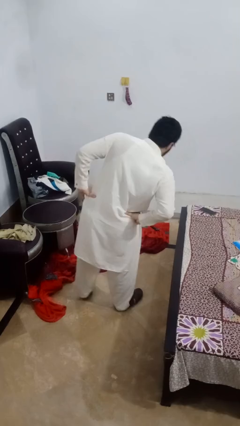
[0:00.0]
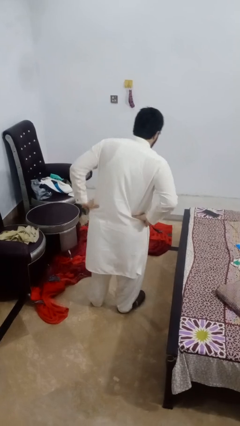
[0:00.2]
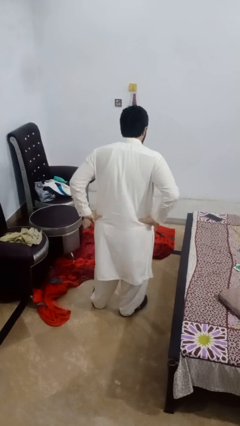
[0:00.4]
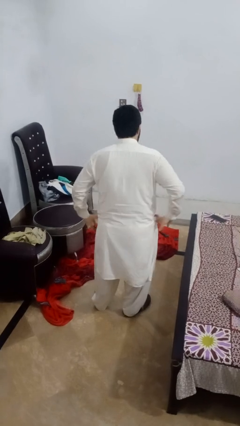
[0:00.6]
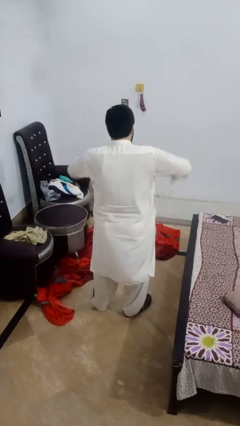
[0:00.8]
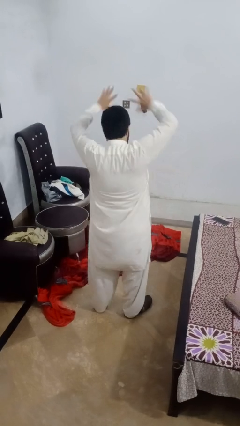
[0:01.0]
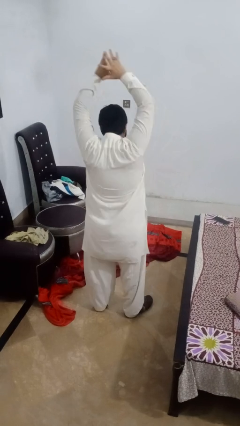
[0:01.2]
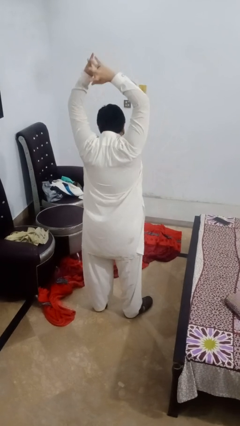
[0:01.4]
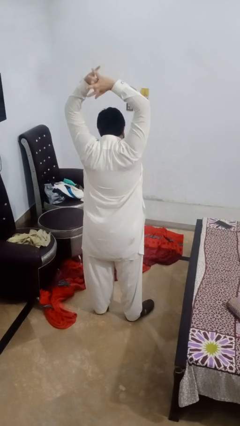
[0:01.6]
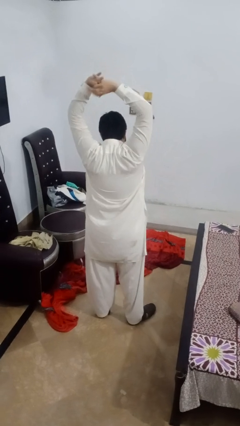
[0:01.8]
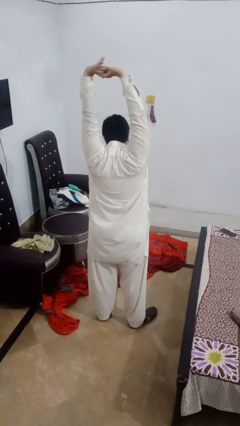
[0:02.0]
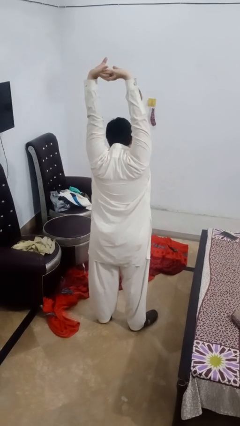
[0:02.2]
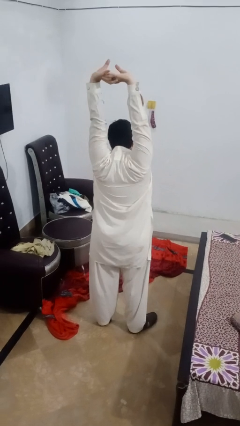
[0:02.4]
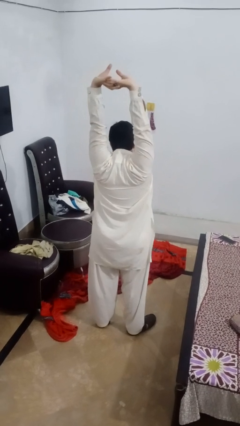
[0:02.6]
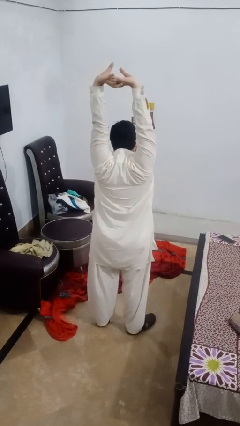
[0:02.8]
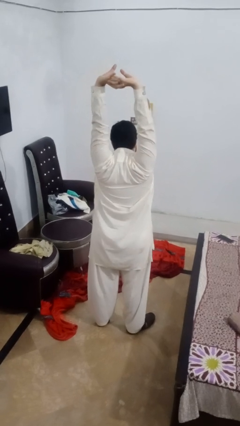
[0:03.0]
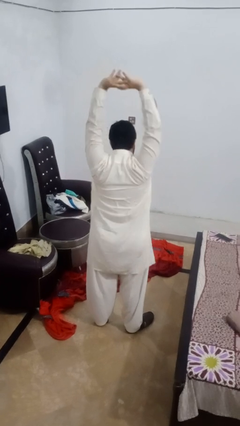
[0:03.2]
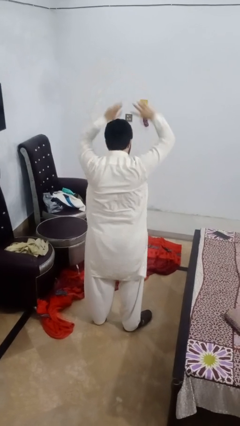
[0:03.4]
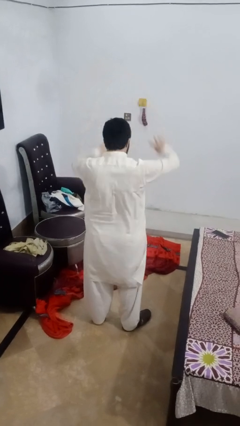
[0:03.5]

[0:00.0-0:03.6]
person stretches arms over head

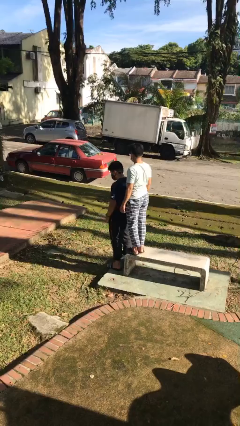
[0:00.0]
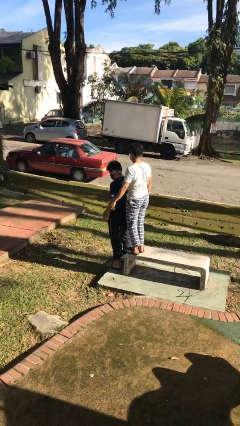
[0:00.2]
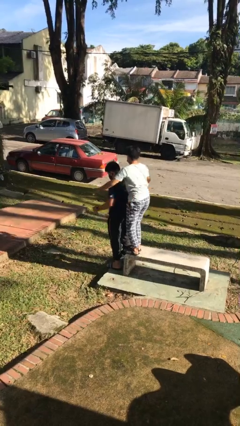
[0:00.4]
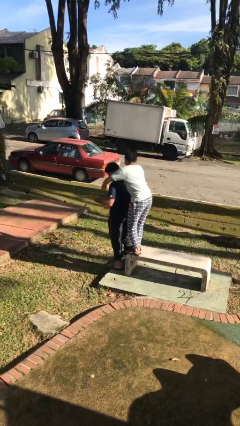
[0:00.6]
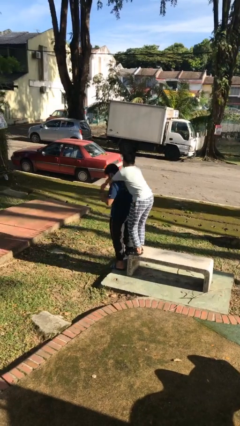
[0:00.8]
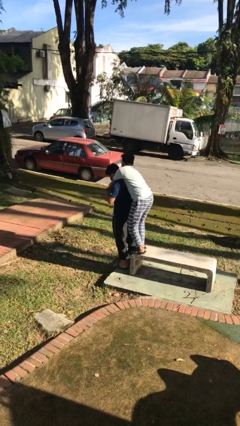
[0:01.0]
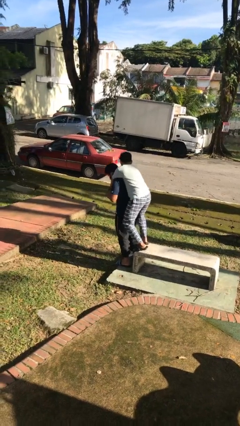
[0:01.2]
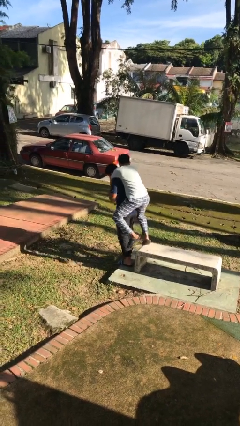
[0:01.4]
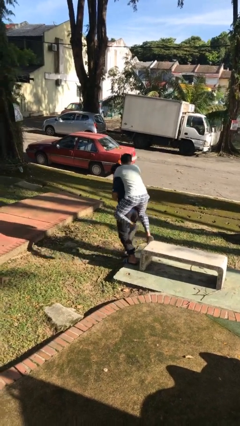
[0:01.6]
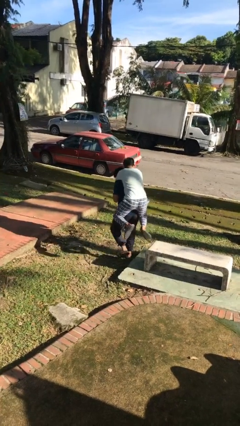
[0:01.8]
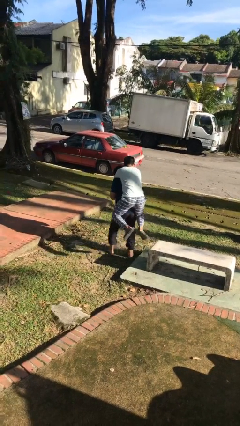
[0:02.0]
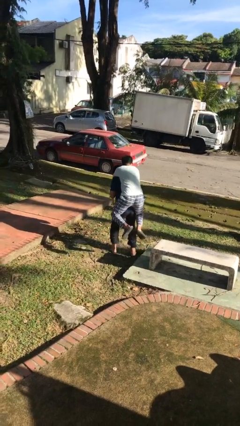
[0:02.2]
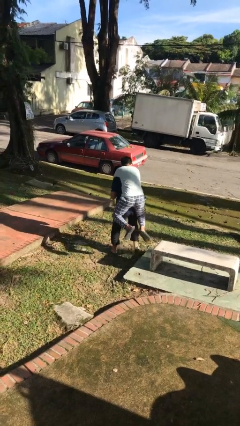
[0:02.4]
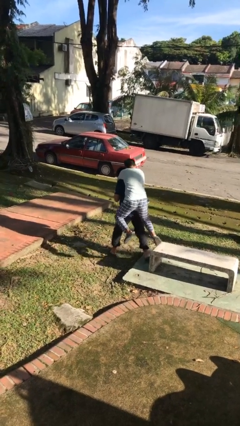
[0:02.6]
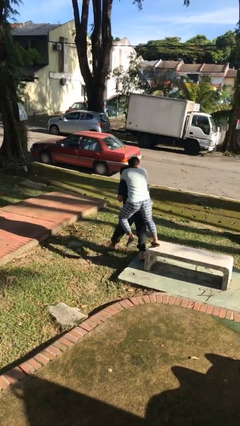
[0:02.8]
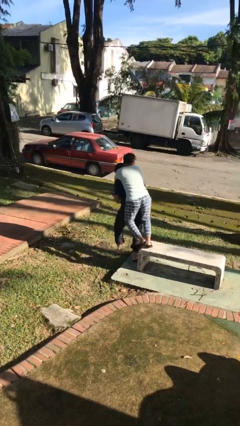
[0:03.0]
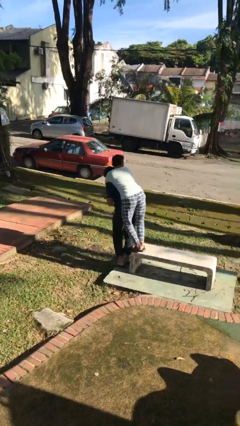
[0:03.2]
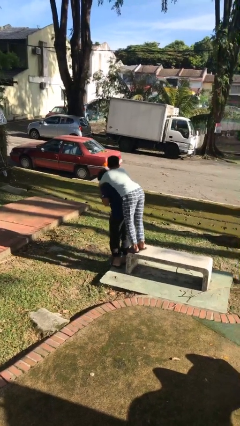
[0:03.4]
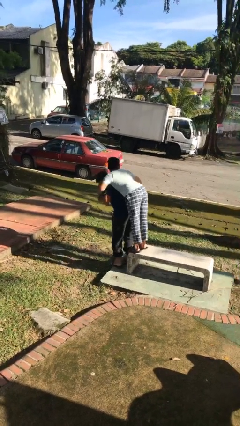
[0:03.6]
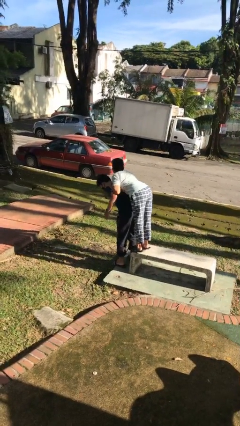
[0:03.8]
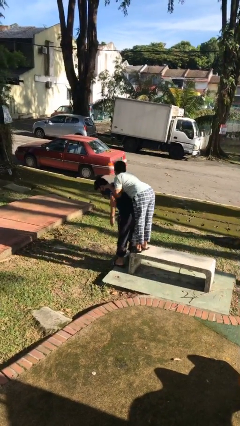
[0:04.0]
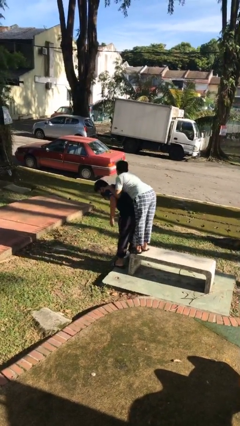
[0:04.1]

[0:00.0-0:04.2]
person carries person on back

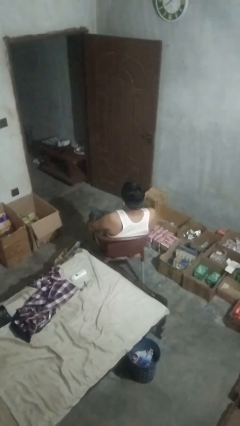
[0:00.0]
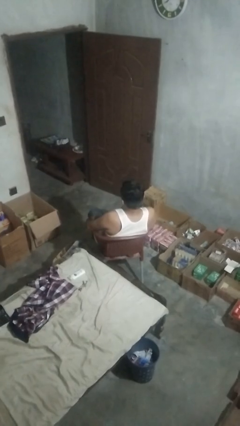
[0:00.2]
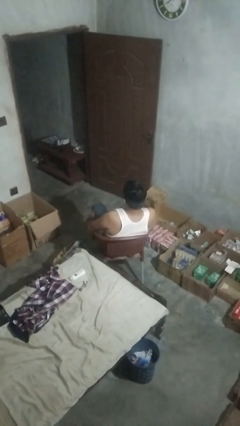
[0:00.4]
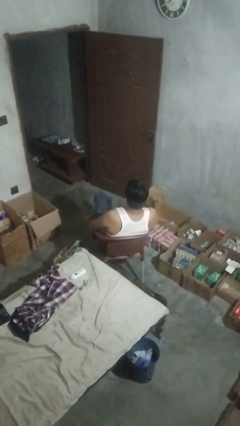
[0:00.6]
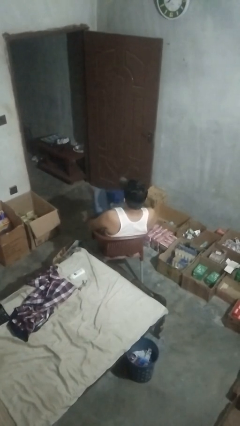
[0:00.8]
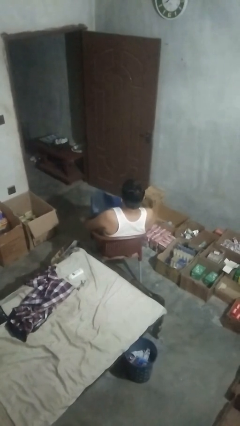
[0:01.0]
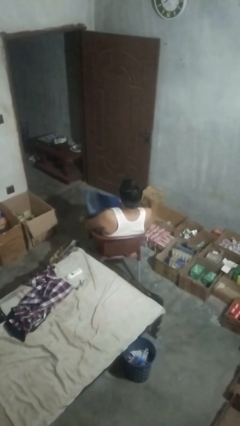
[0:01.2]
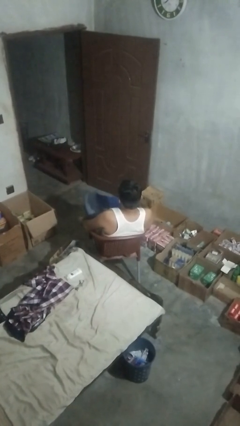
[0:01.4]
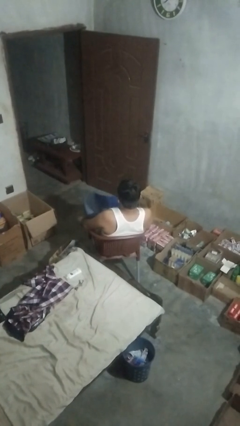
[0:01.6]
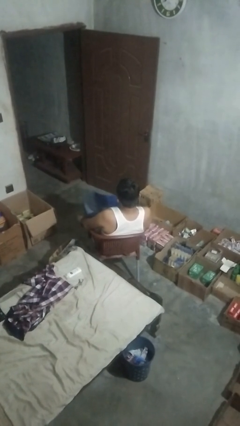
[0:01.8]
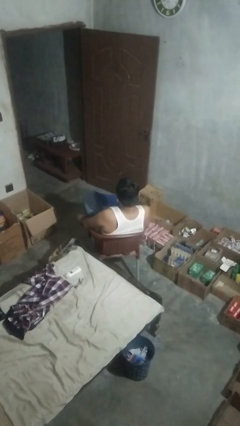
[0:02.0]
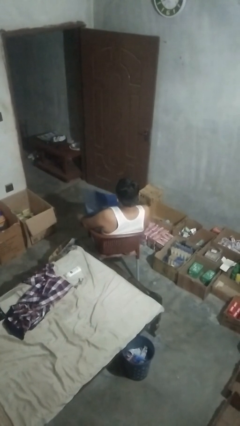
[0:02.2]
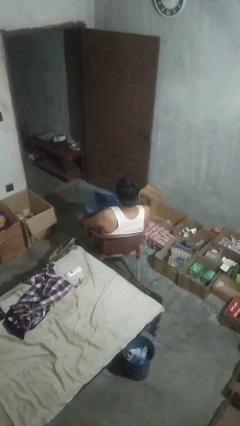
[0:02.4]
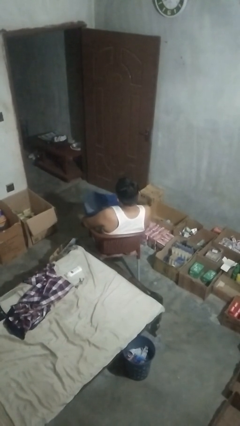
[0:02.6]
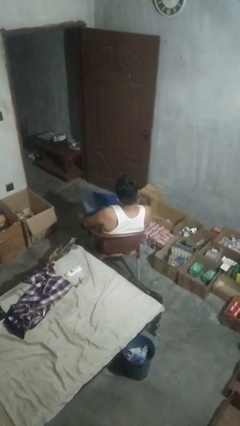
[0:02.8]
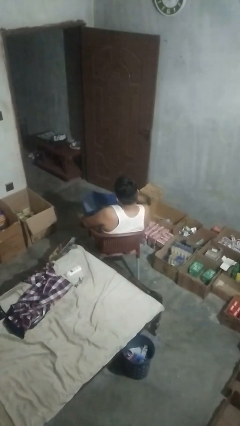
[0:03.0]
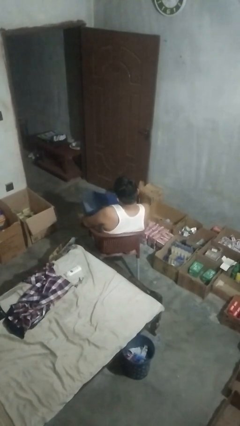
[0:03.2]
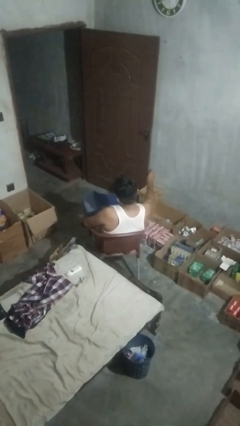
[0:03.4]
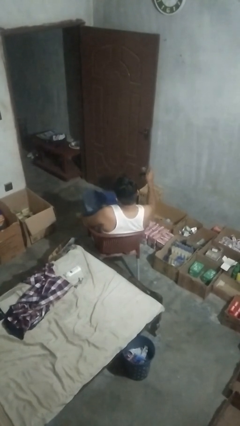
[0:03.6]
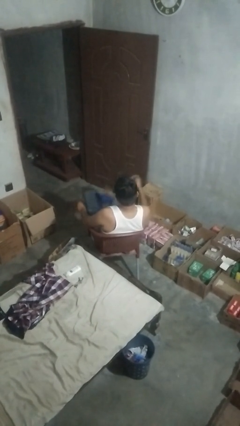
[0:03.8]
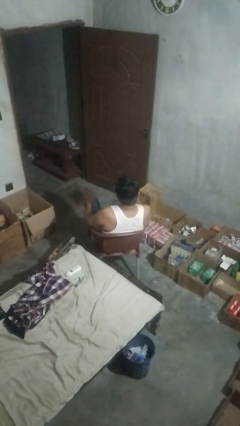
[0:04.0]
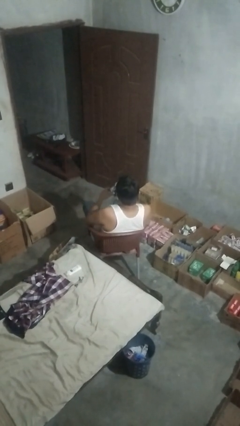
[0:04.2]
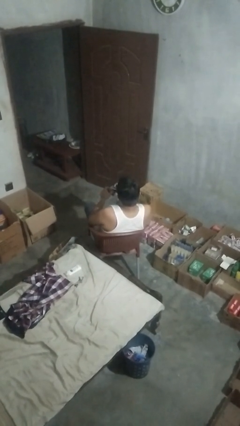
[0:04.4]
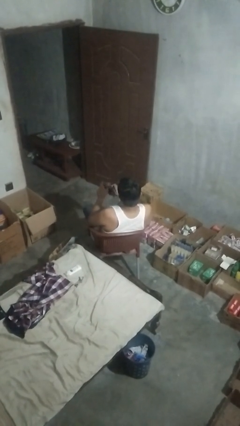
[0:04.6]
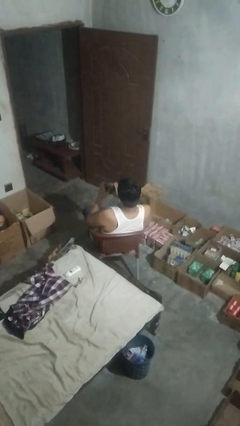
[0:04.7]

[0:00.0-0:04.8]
person takes off socks

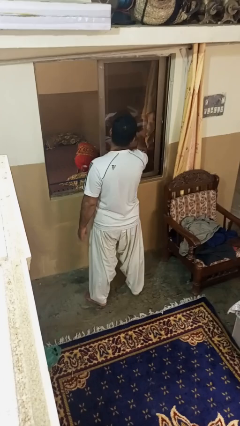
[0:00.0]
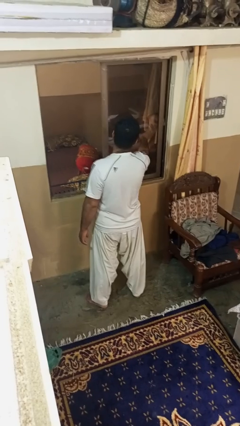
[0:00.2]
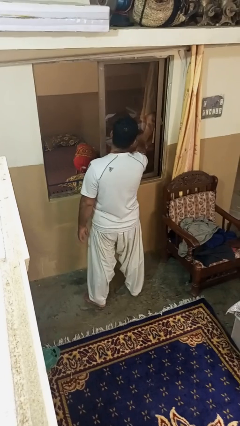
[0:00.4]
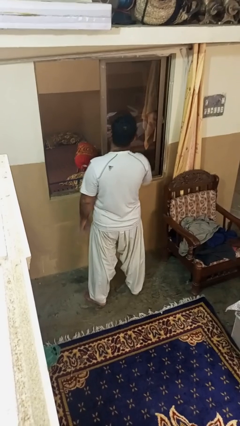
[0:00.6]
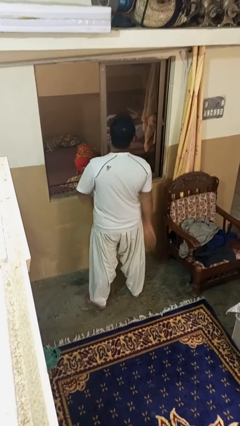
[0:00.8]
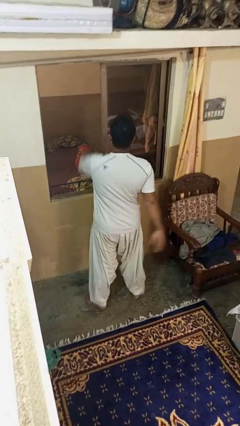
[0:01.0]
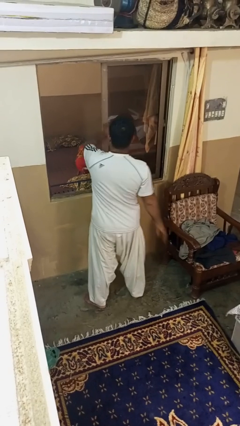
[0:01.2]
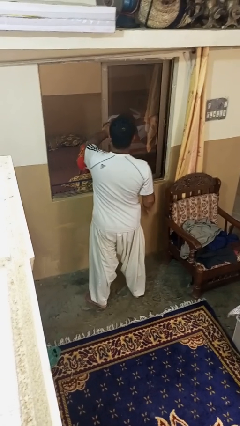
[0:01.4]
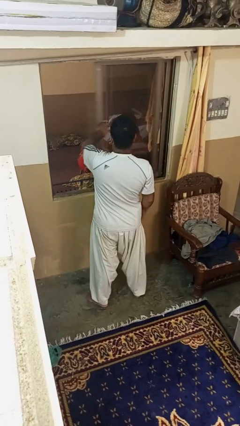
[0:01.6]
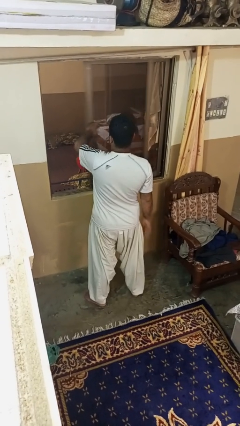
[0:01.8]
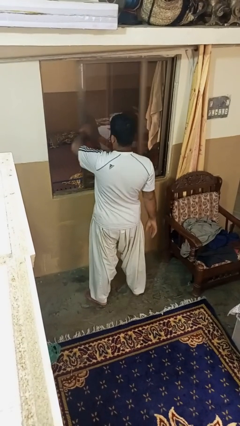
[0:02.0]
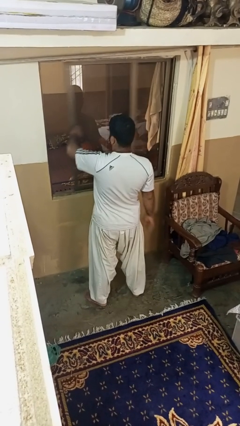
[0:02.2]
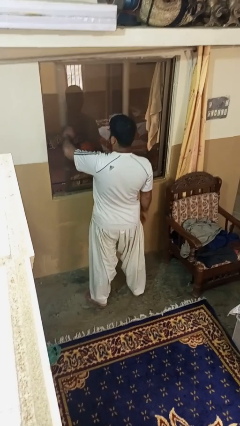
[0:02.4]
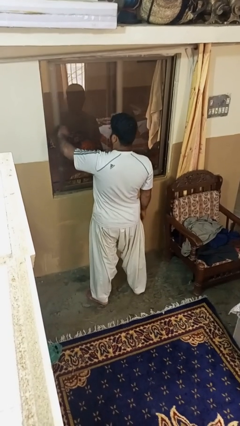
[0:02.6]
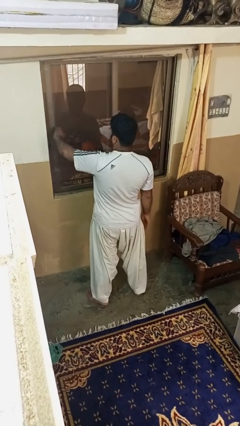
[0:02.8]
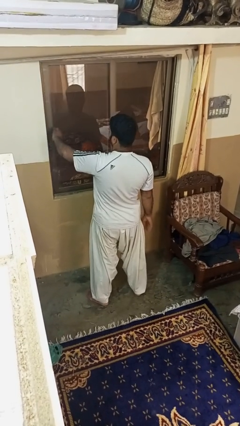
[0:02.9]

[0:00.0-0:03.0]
person closes home window

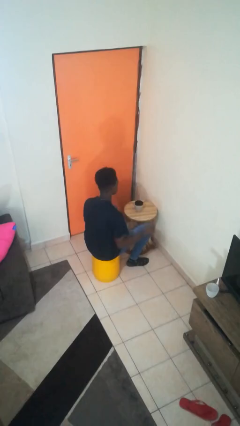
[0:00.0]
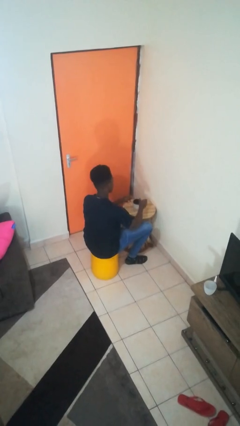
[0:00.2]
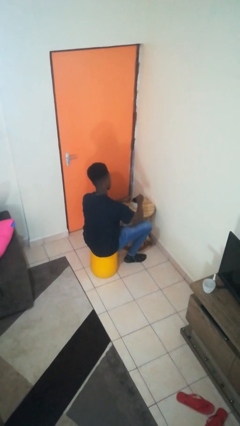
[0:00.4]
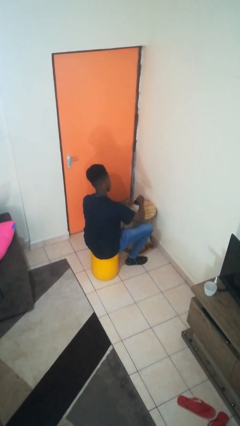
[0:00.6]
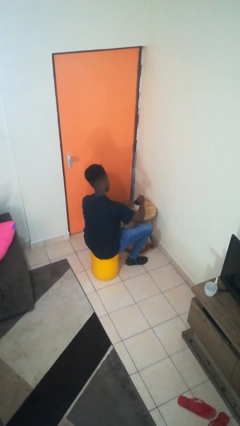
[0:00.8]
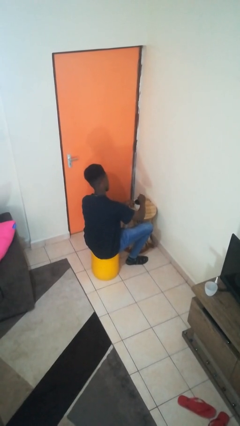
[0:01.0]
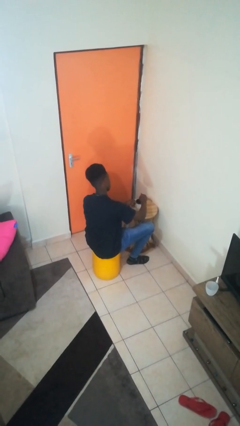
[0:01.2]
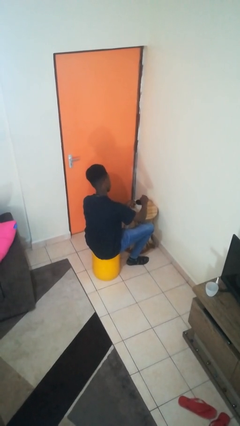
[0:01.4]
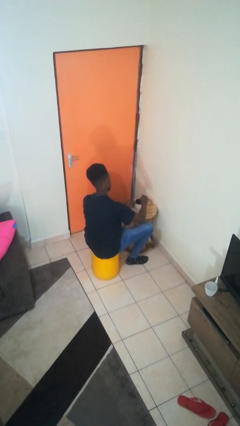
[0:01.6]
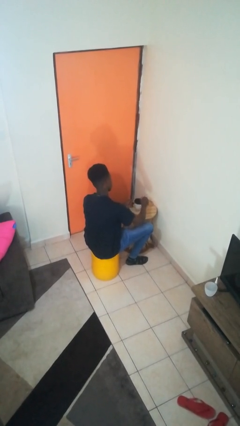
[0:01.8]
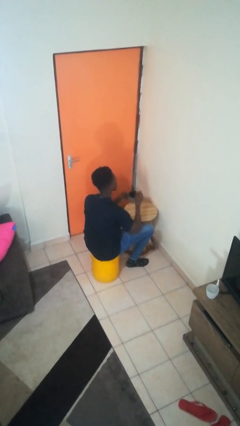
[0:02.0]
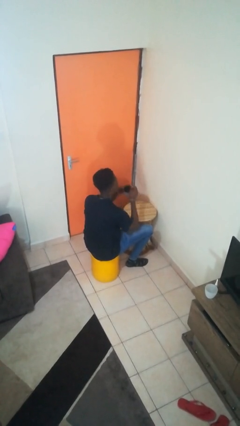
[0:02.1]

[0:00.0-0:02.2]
person stirs mug
